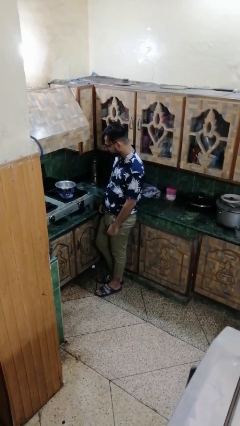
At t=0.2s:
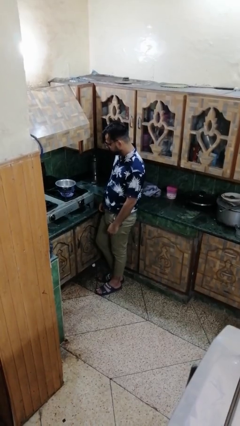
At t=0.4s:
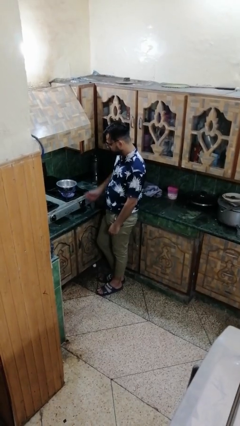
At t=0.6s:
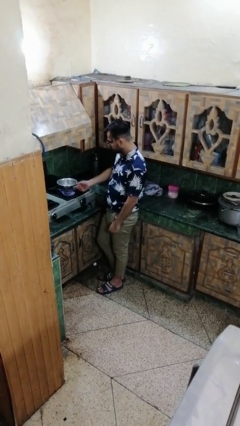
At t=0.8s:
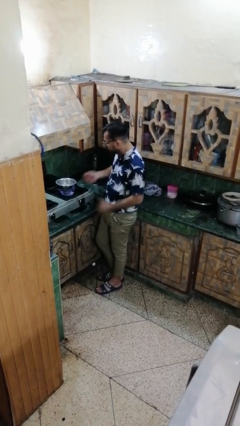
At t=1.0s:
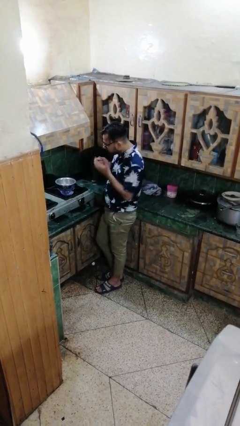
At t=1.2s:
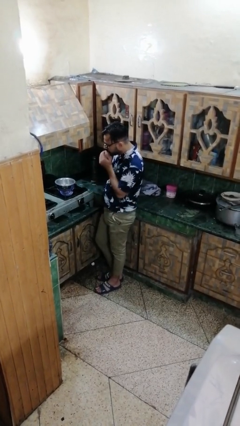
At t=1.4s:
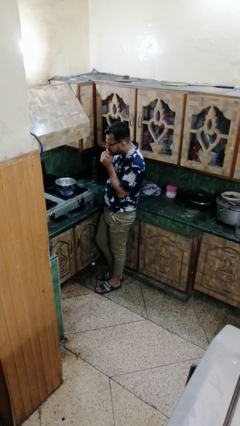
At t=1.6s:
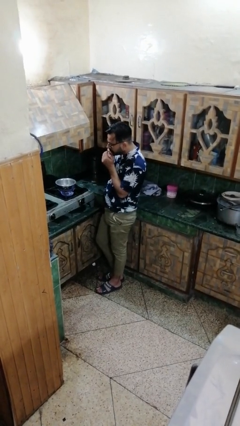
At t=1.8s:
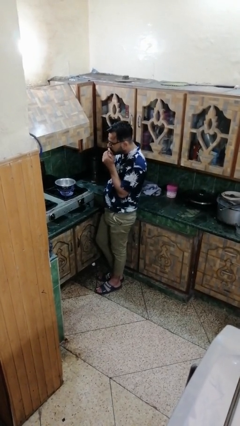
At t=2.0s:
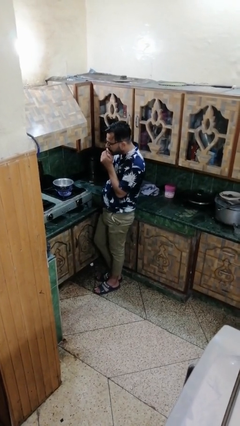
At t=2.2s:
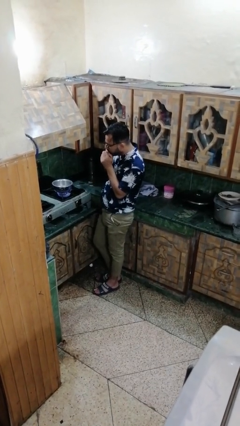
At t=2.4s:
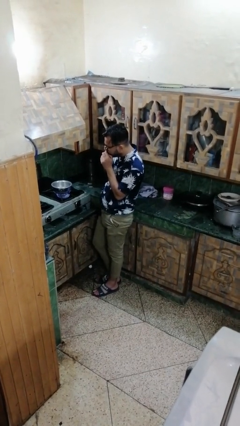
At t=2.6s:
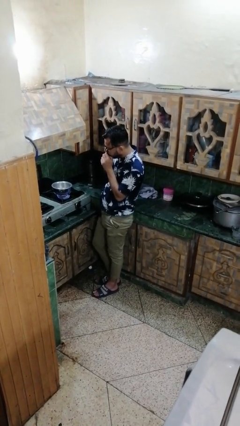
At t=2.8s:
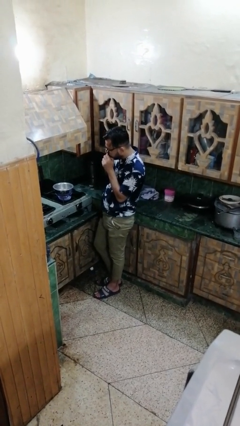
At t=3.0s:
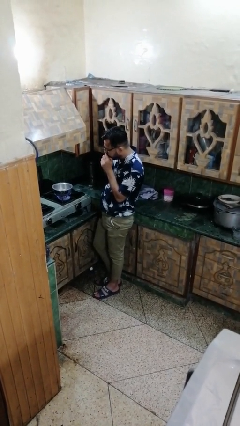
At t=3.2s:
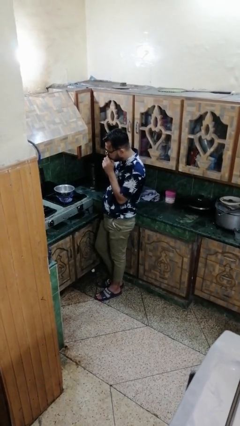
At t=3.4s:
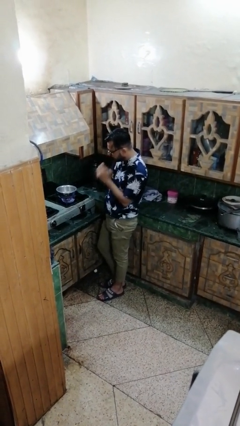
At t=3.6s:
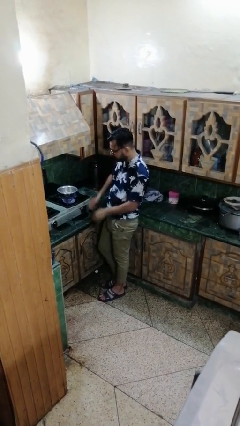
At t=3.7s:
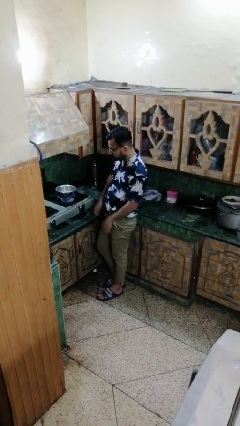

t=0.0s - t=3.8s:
person burns hand

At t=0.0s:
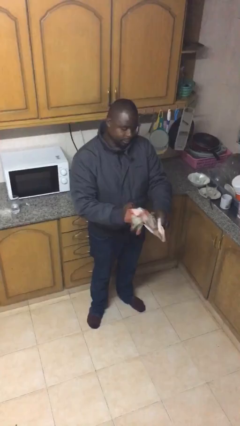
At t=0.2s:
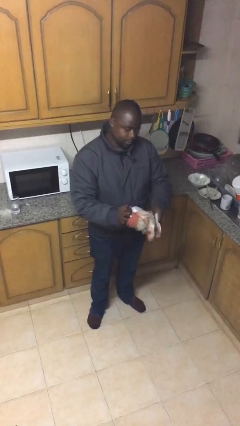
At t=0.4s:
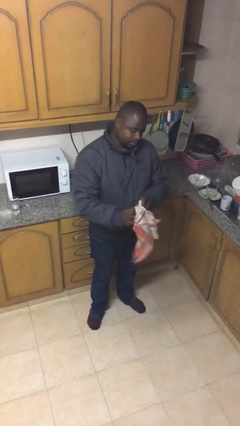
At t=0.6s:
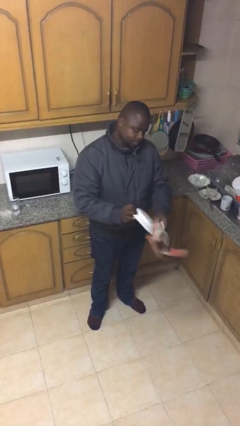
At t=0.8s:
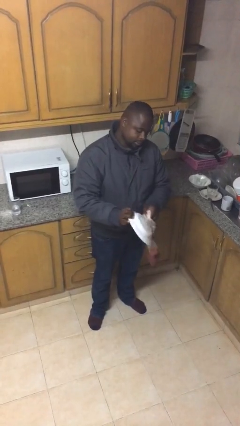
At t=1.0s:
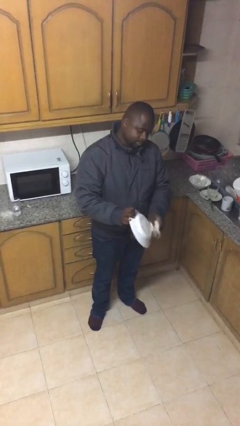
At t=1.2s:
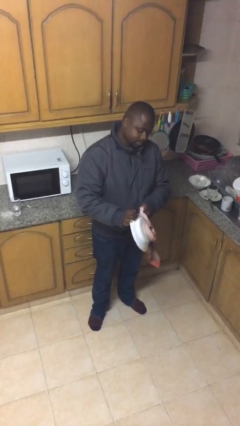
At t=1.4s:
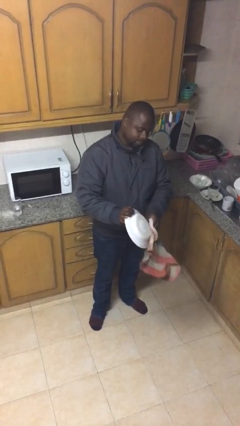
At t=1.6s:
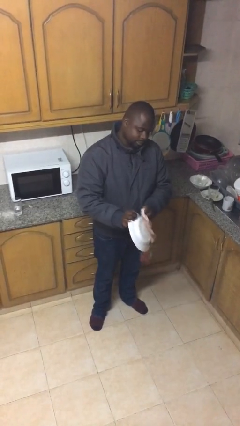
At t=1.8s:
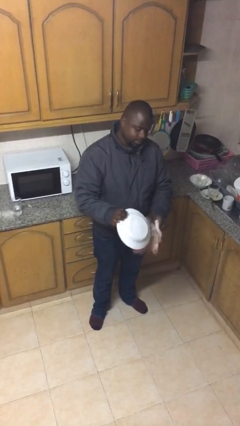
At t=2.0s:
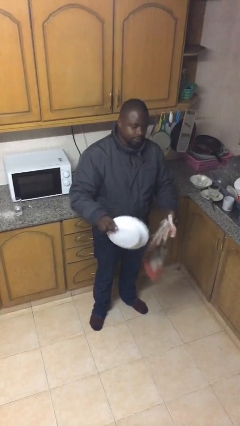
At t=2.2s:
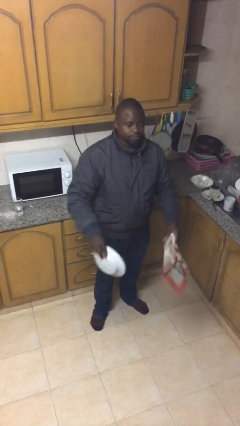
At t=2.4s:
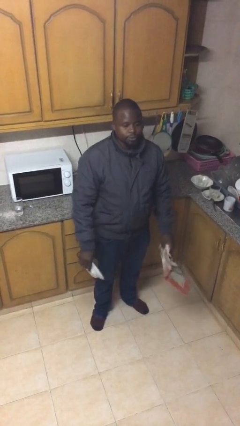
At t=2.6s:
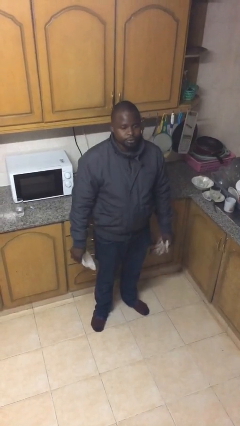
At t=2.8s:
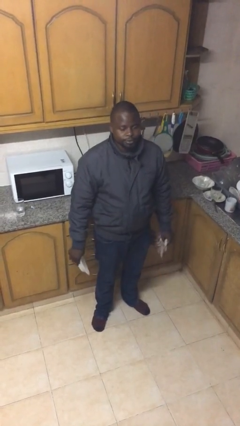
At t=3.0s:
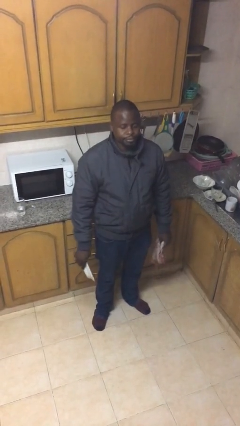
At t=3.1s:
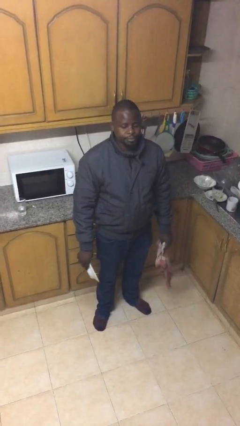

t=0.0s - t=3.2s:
person dries dish

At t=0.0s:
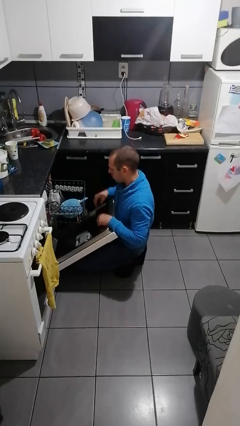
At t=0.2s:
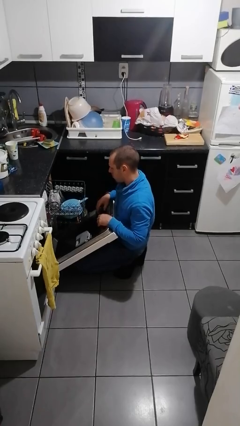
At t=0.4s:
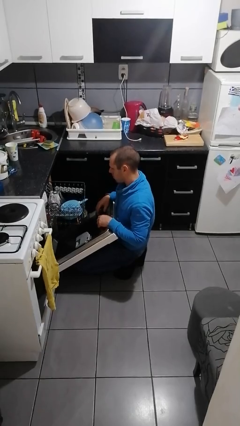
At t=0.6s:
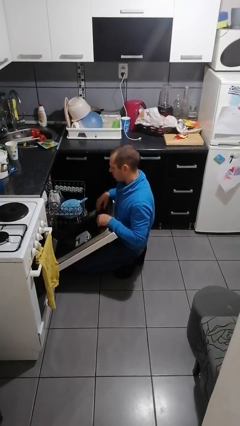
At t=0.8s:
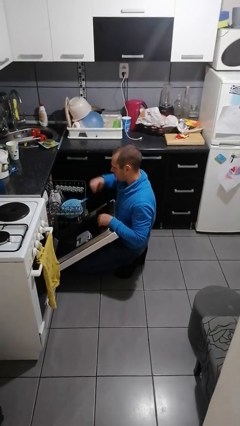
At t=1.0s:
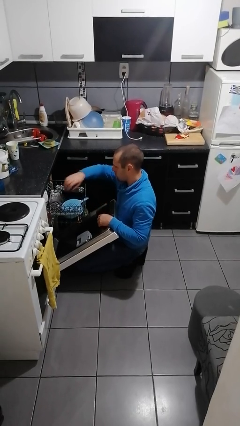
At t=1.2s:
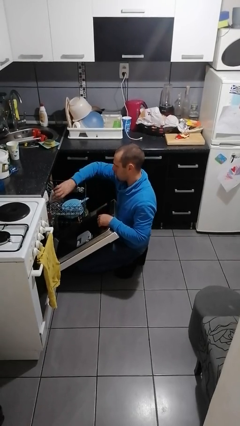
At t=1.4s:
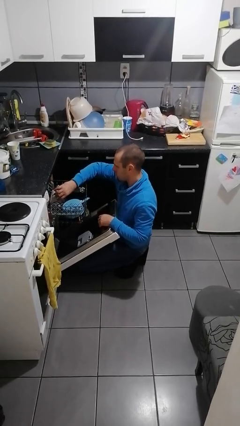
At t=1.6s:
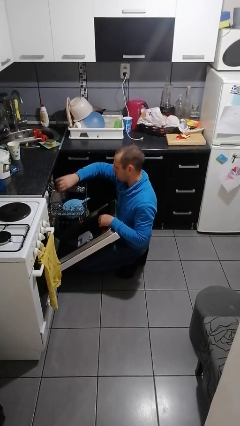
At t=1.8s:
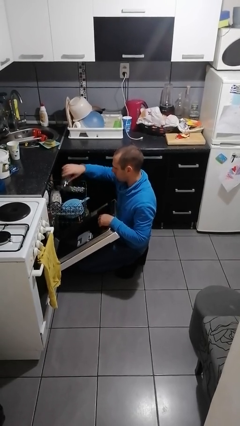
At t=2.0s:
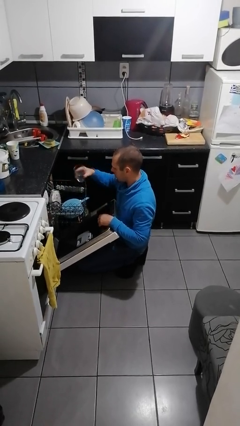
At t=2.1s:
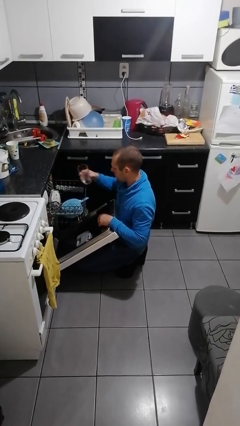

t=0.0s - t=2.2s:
person unloads dishwasher

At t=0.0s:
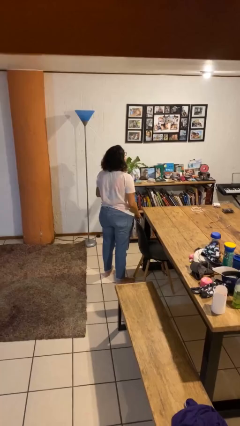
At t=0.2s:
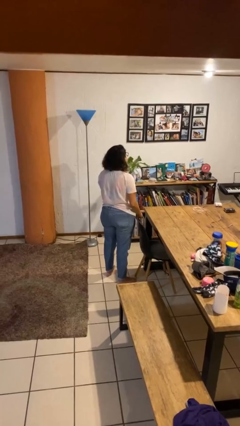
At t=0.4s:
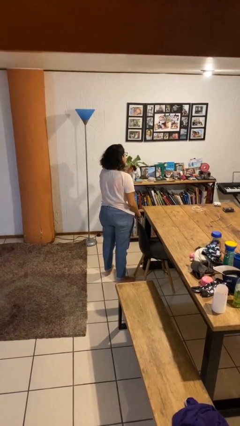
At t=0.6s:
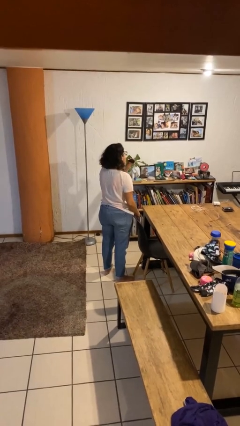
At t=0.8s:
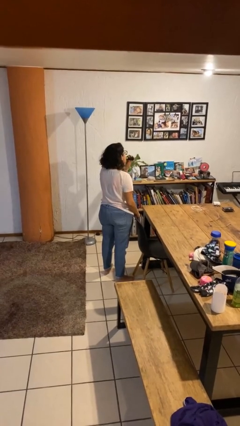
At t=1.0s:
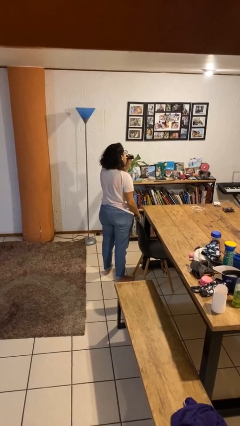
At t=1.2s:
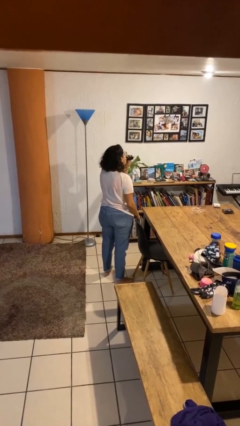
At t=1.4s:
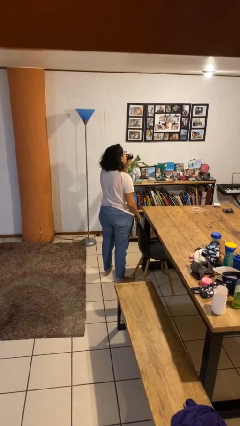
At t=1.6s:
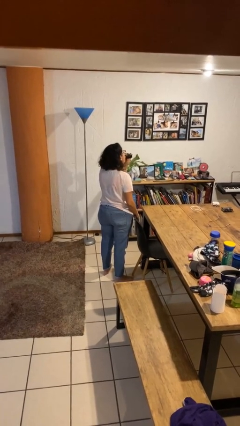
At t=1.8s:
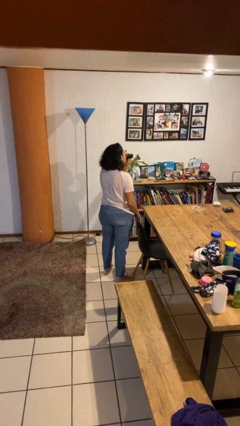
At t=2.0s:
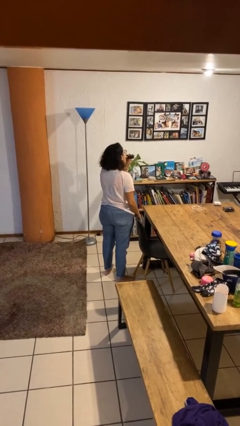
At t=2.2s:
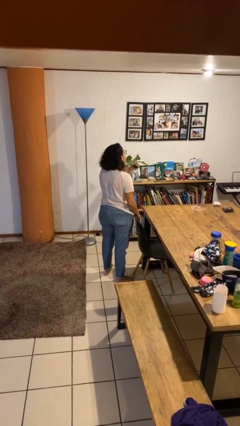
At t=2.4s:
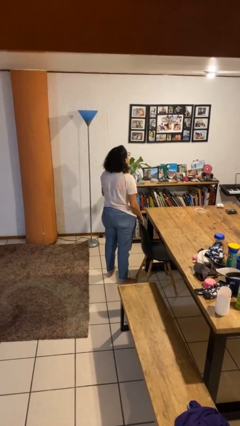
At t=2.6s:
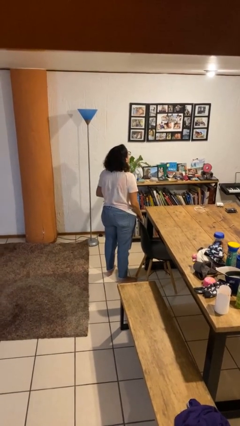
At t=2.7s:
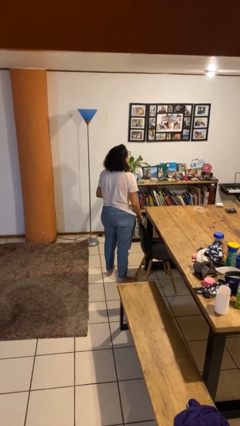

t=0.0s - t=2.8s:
person vapes

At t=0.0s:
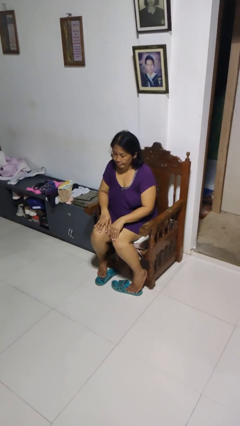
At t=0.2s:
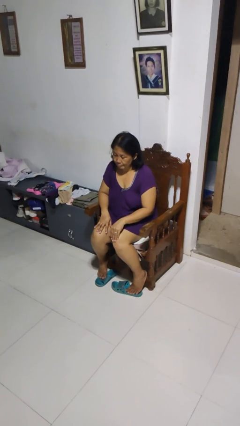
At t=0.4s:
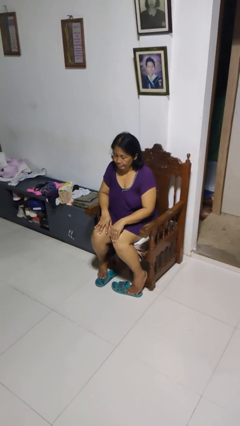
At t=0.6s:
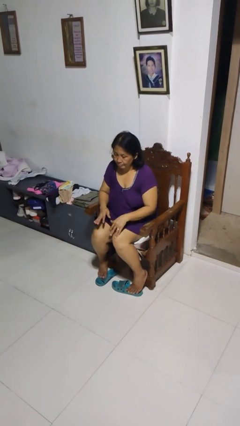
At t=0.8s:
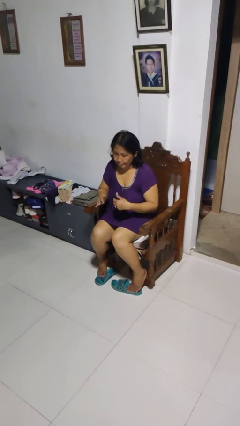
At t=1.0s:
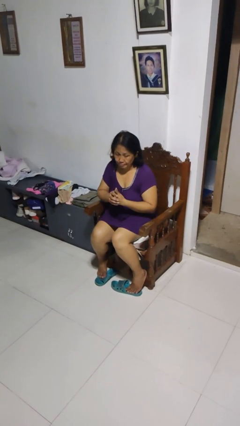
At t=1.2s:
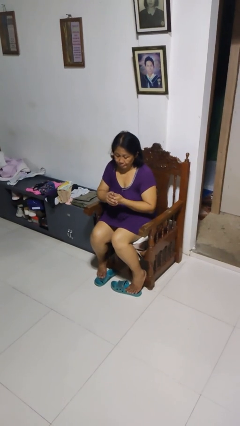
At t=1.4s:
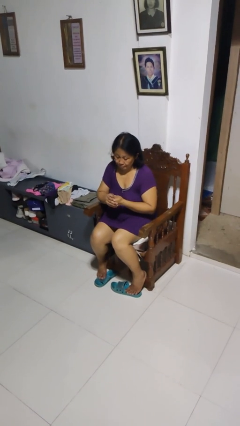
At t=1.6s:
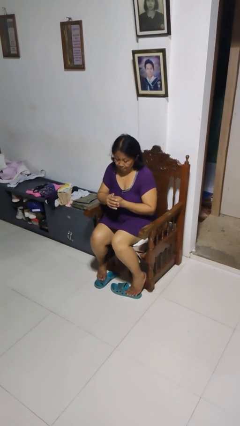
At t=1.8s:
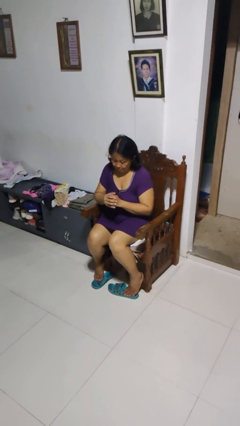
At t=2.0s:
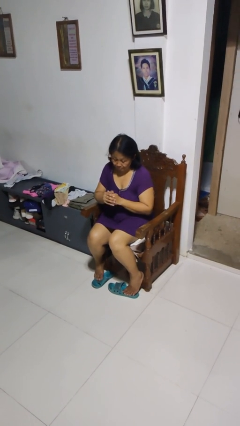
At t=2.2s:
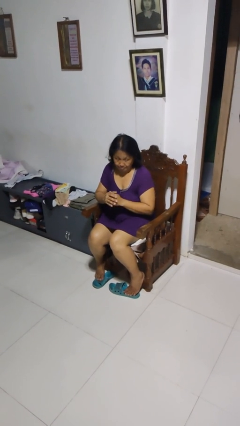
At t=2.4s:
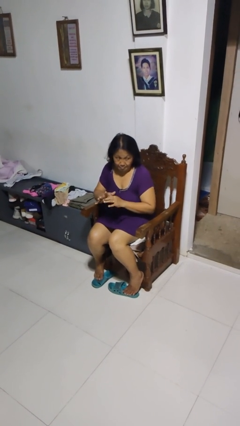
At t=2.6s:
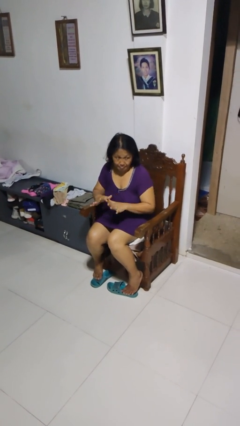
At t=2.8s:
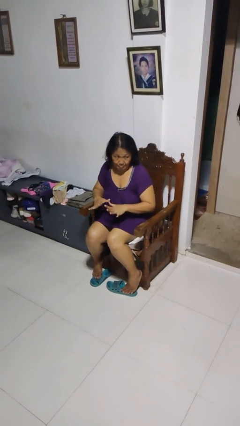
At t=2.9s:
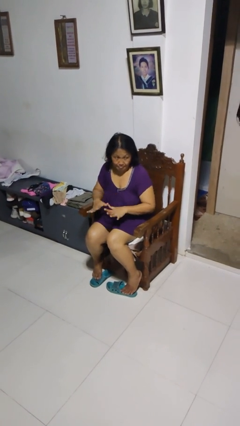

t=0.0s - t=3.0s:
person looks at hands in lap

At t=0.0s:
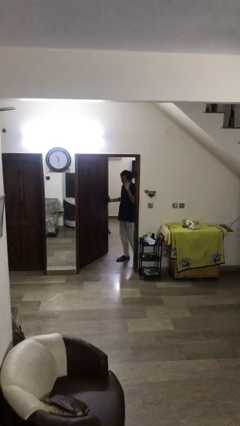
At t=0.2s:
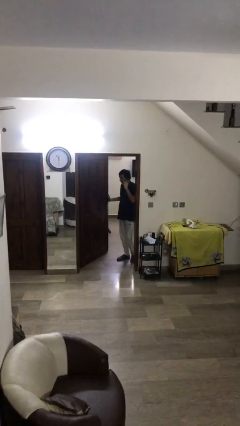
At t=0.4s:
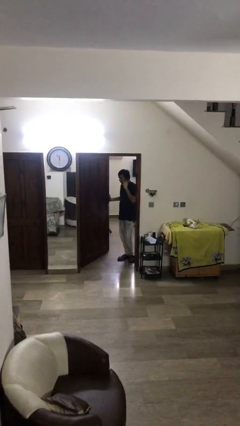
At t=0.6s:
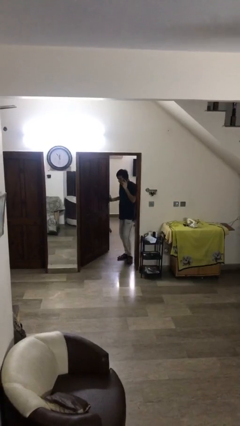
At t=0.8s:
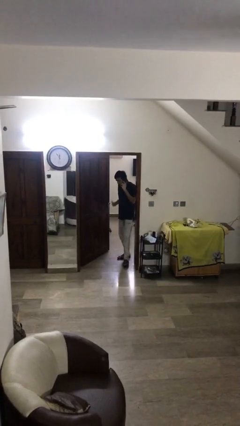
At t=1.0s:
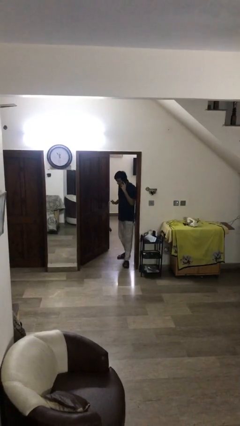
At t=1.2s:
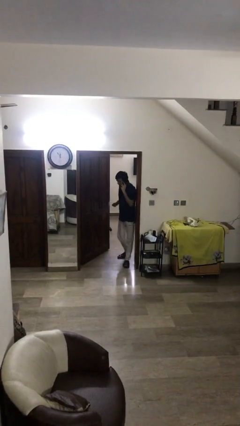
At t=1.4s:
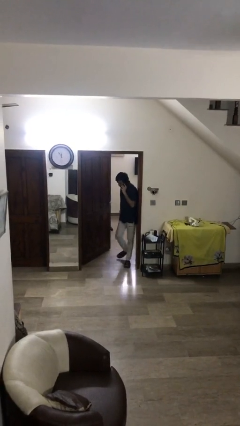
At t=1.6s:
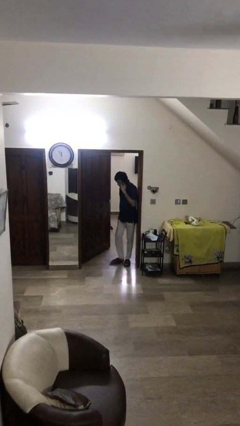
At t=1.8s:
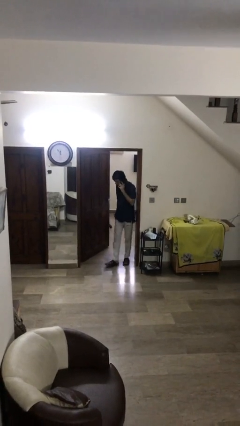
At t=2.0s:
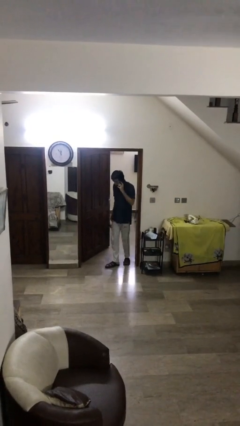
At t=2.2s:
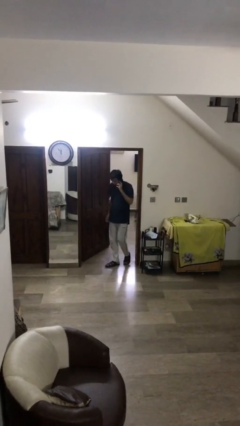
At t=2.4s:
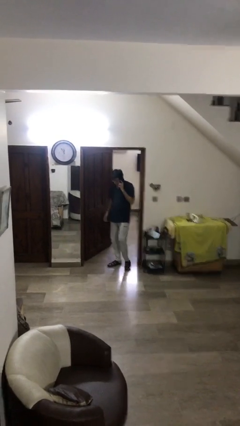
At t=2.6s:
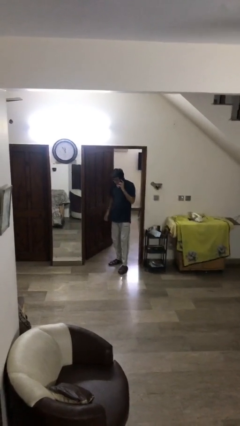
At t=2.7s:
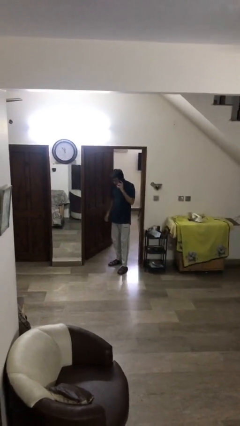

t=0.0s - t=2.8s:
person enters scene through structure
